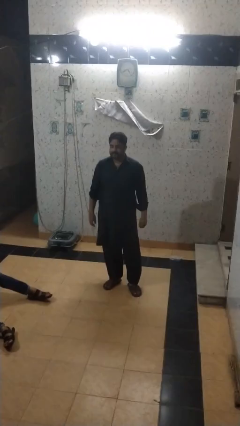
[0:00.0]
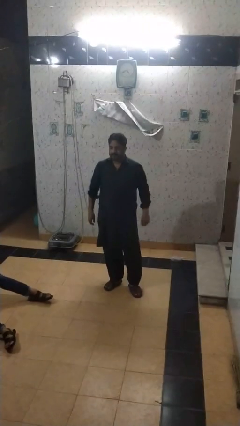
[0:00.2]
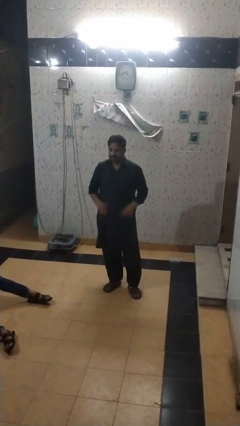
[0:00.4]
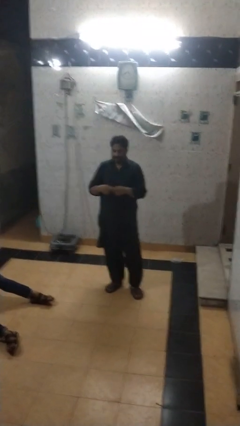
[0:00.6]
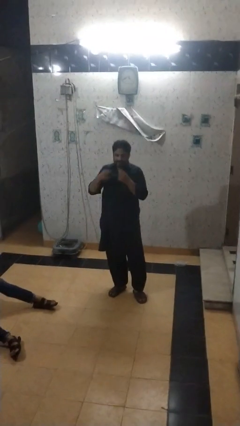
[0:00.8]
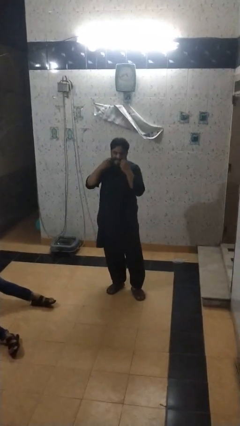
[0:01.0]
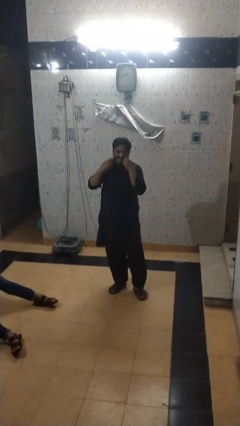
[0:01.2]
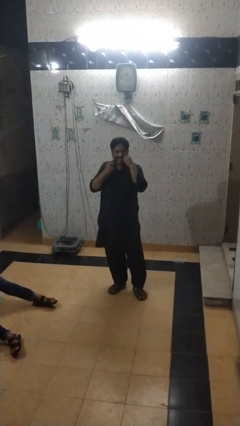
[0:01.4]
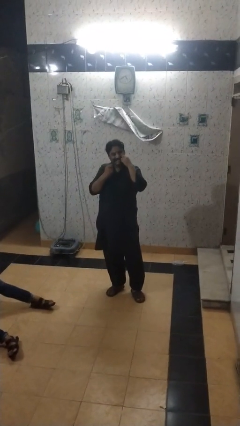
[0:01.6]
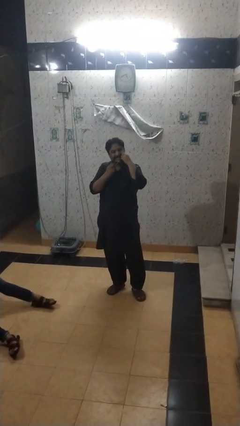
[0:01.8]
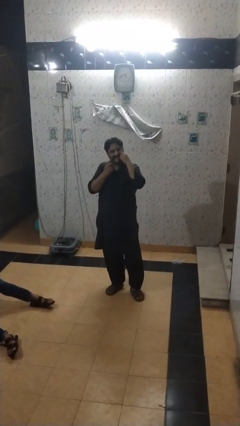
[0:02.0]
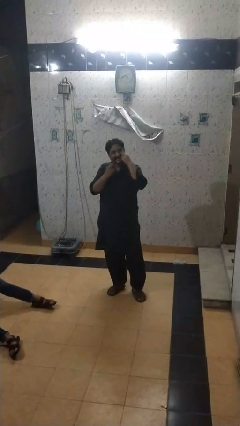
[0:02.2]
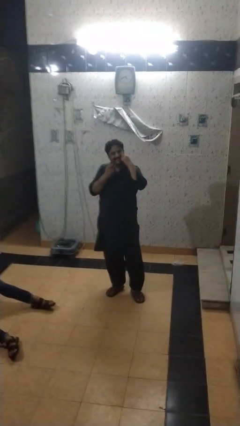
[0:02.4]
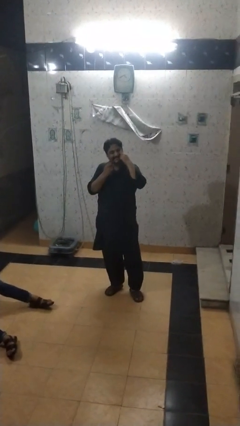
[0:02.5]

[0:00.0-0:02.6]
person flosses

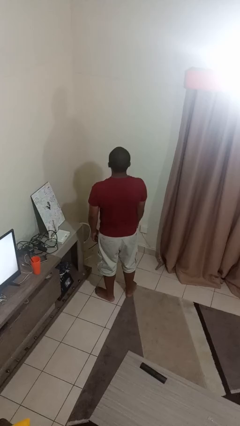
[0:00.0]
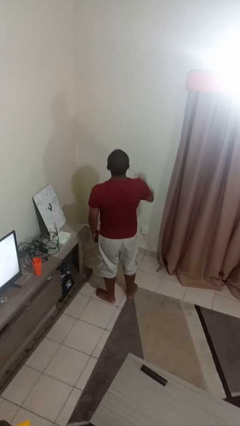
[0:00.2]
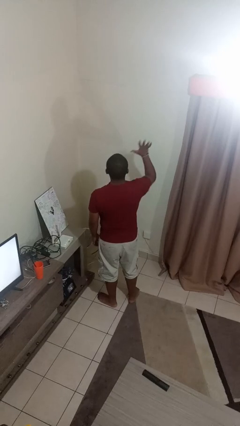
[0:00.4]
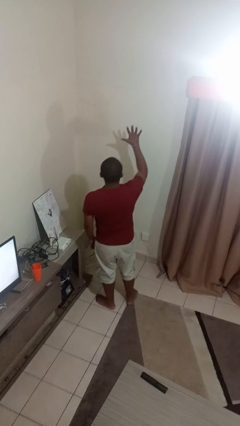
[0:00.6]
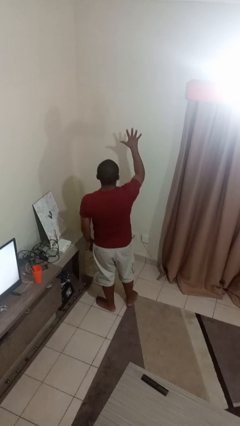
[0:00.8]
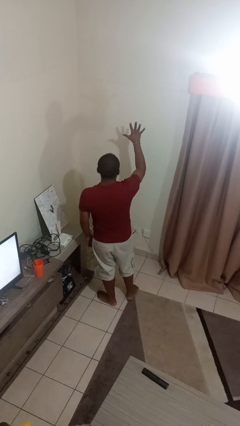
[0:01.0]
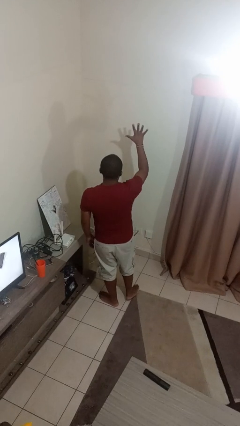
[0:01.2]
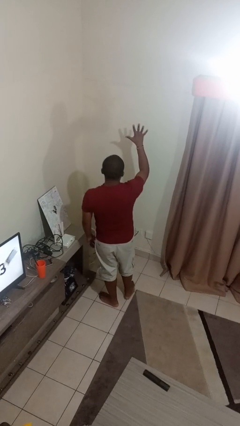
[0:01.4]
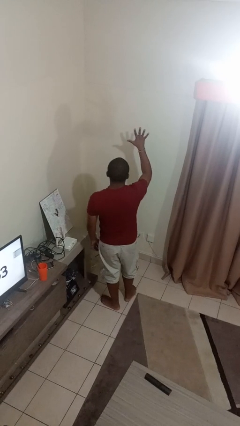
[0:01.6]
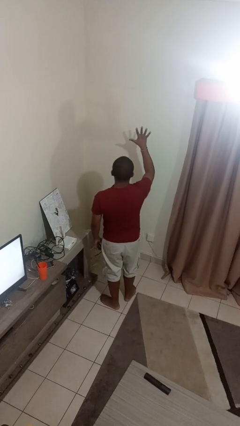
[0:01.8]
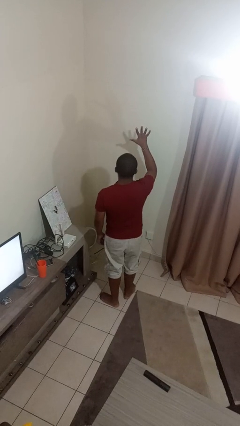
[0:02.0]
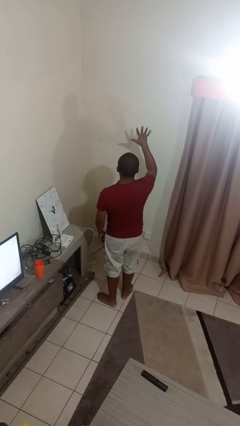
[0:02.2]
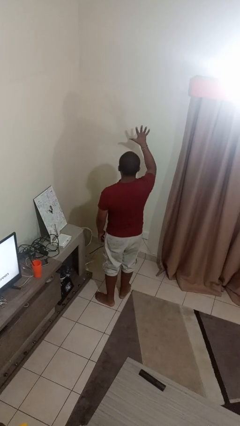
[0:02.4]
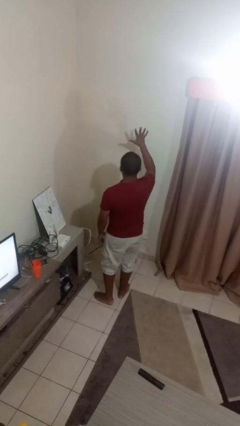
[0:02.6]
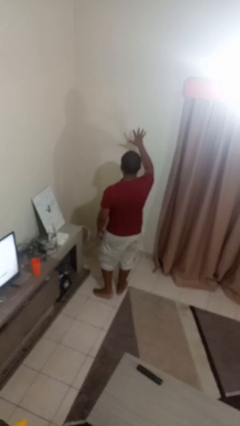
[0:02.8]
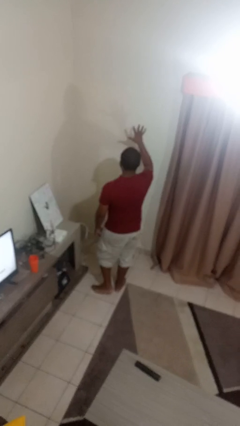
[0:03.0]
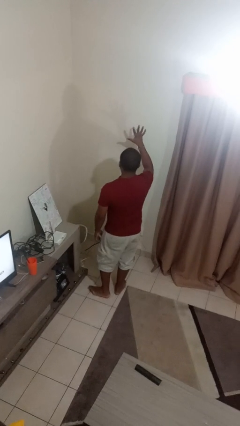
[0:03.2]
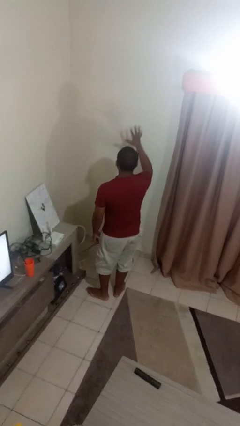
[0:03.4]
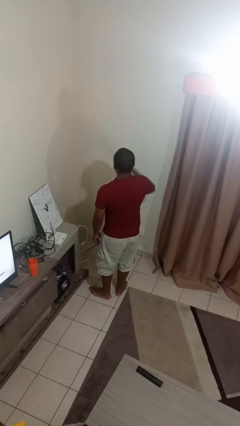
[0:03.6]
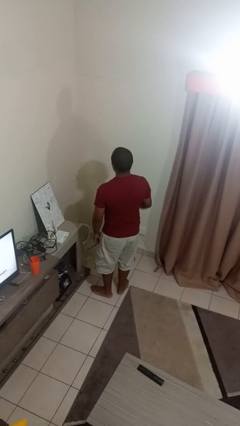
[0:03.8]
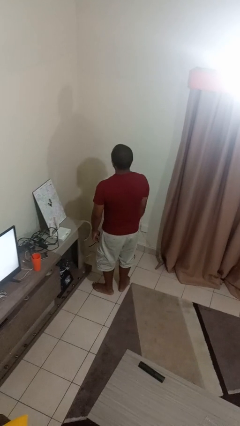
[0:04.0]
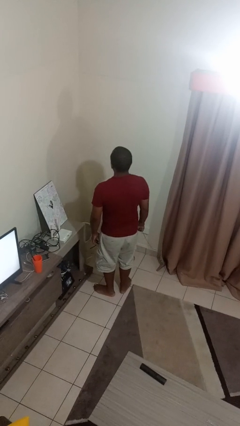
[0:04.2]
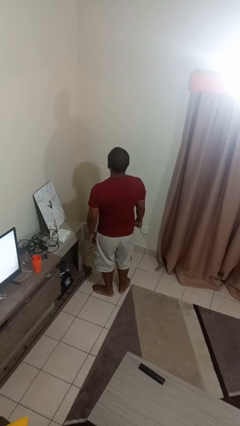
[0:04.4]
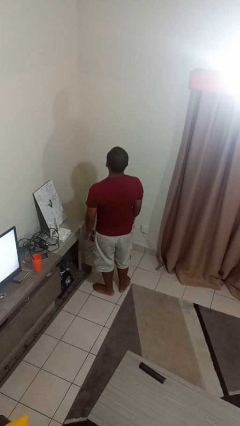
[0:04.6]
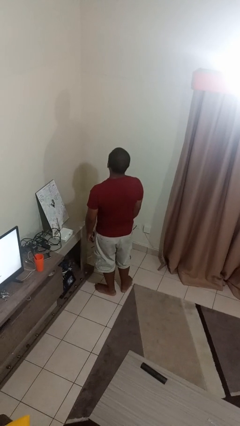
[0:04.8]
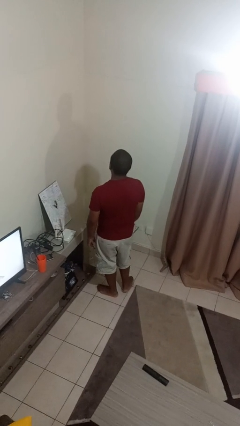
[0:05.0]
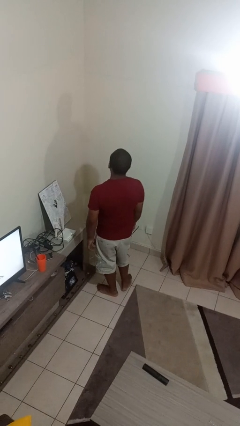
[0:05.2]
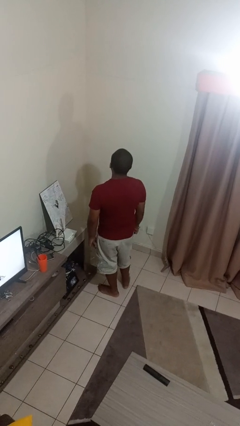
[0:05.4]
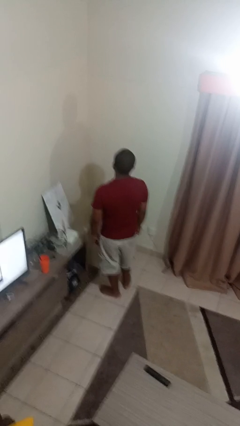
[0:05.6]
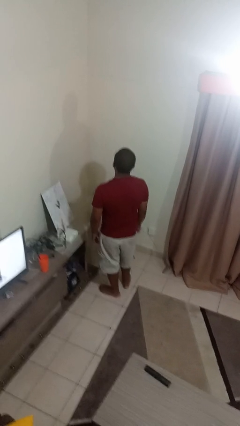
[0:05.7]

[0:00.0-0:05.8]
person gestures number five

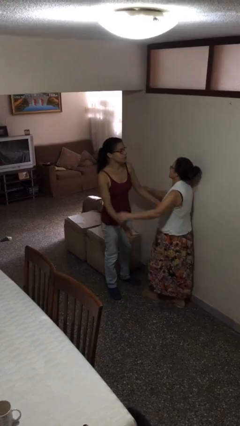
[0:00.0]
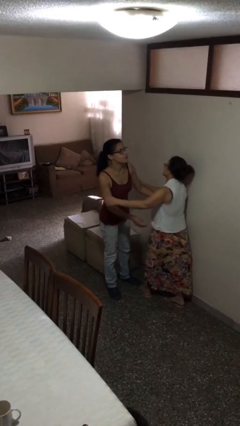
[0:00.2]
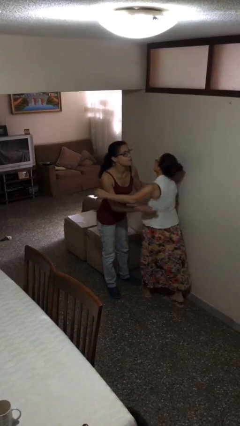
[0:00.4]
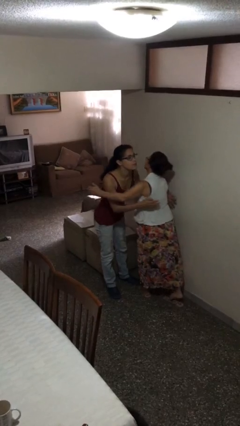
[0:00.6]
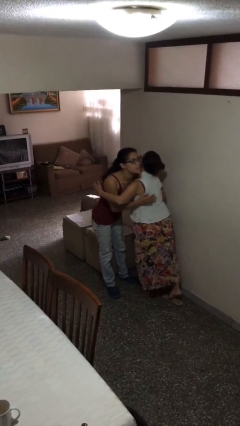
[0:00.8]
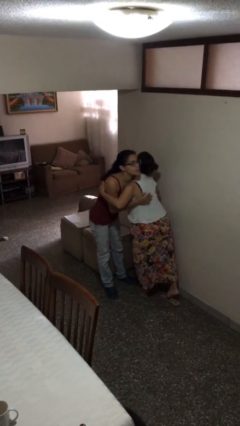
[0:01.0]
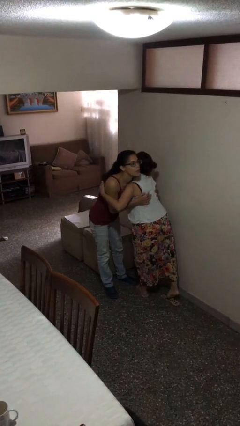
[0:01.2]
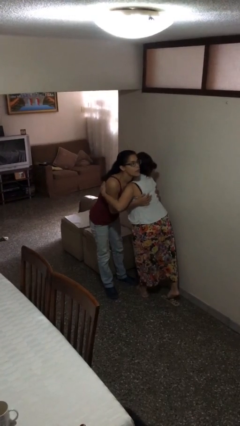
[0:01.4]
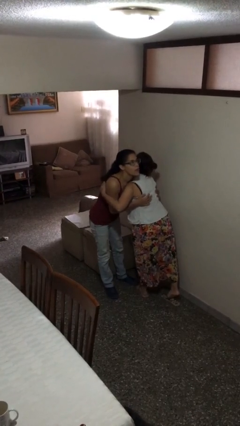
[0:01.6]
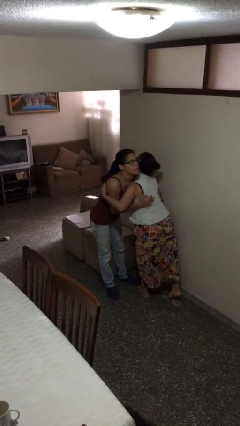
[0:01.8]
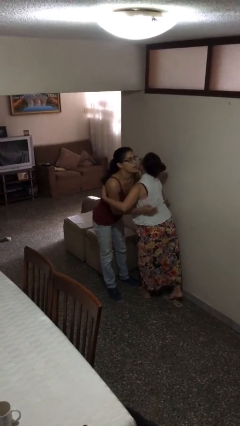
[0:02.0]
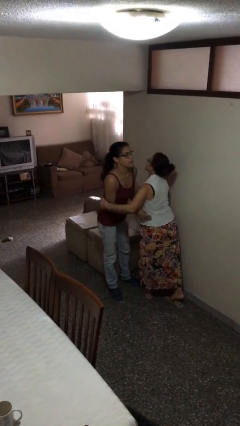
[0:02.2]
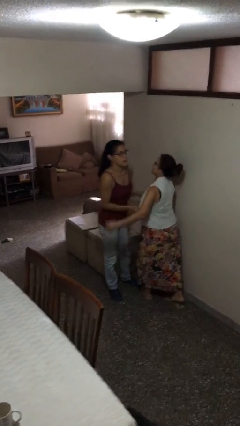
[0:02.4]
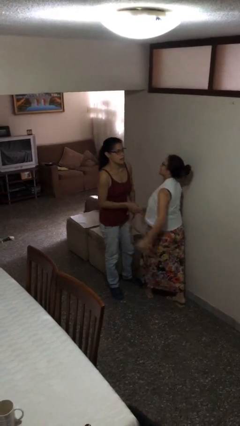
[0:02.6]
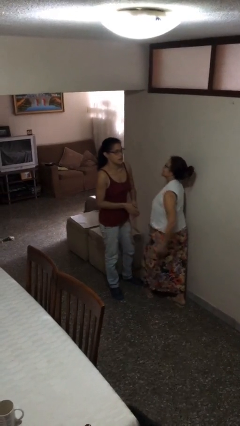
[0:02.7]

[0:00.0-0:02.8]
person embraces person

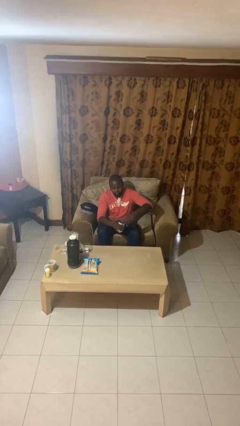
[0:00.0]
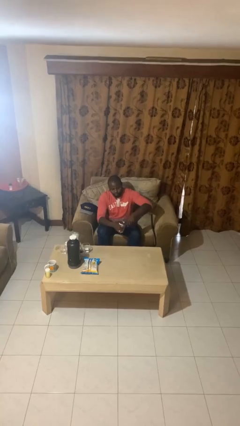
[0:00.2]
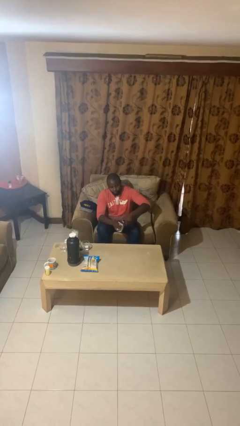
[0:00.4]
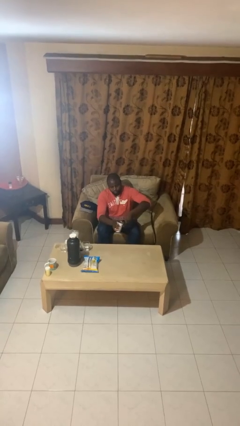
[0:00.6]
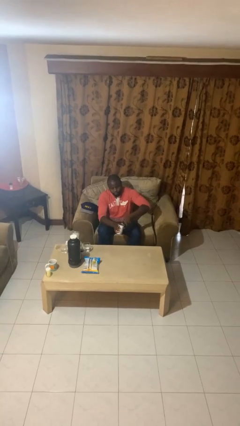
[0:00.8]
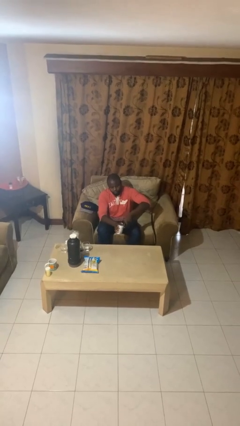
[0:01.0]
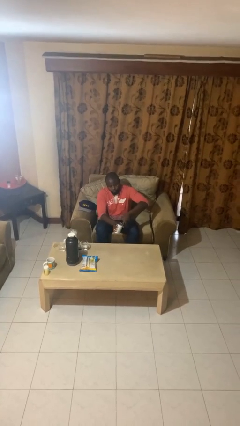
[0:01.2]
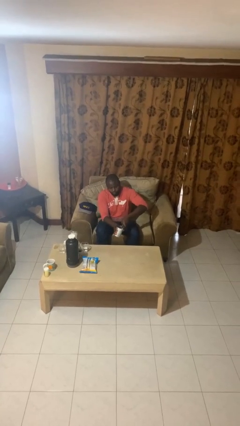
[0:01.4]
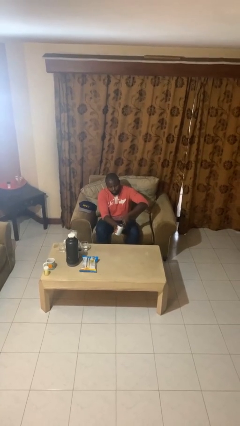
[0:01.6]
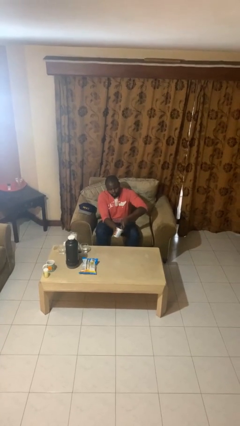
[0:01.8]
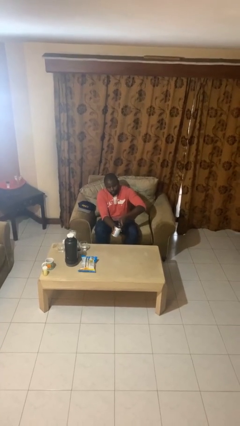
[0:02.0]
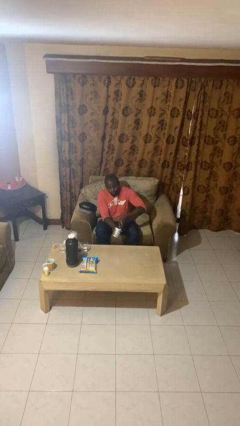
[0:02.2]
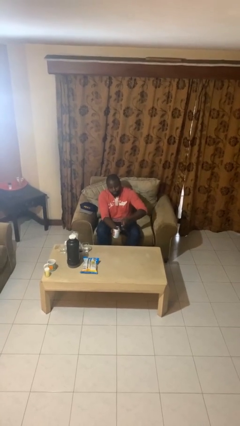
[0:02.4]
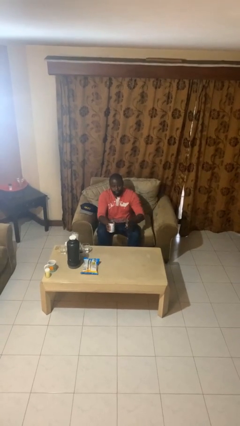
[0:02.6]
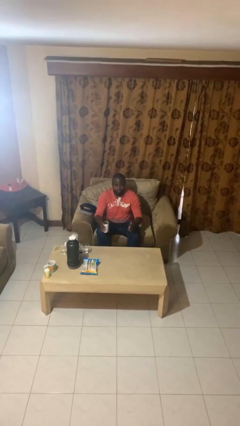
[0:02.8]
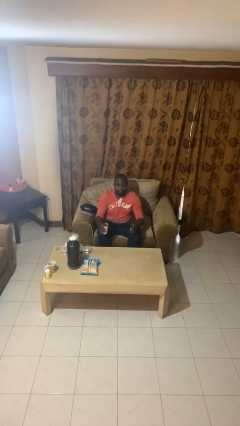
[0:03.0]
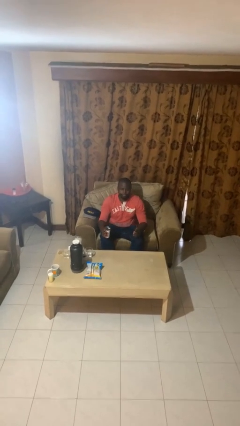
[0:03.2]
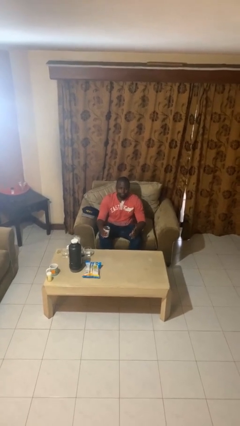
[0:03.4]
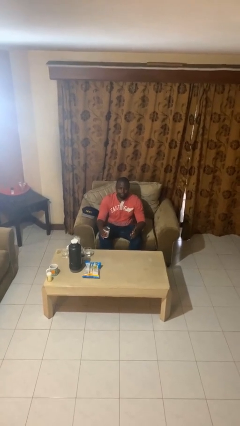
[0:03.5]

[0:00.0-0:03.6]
person opens can with can opener

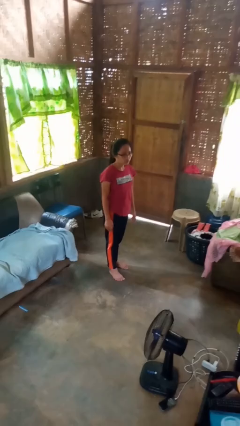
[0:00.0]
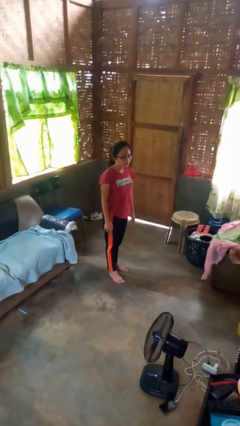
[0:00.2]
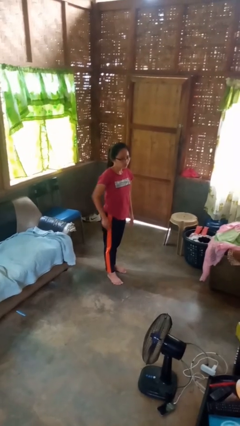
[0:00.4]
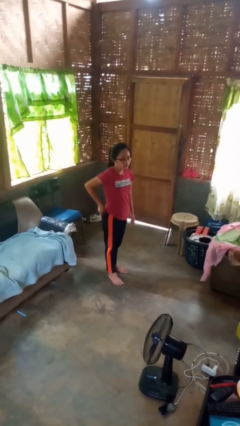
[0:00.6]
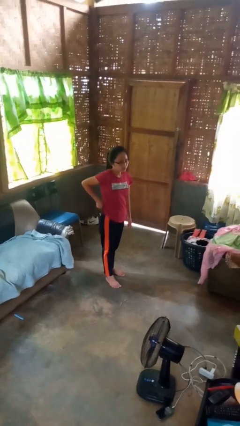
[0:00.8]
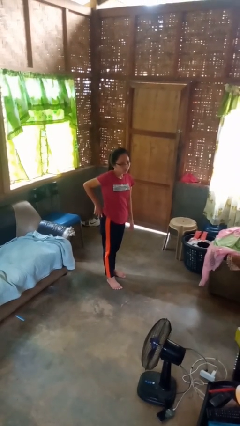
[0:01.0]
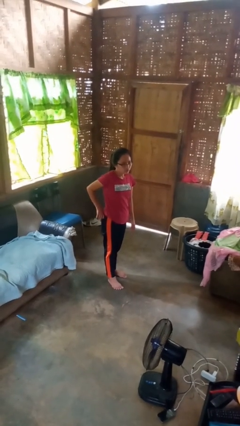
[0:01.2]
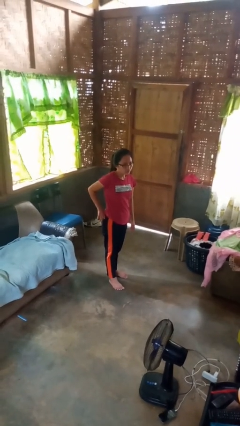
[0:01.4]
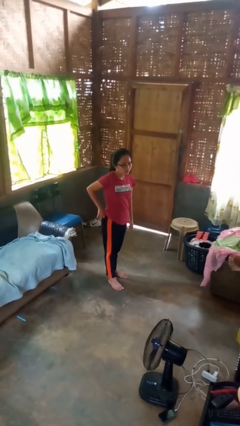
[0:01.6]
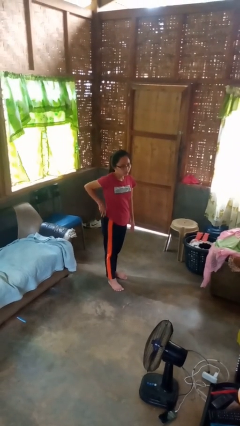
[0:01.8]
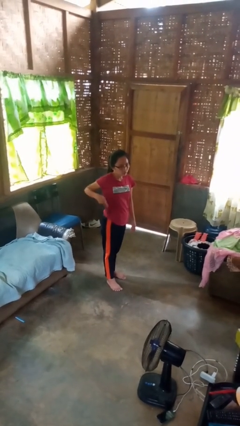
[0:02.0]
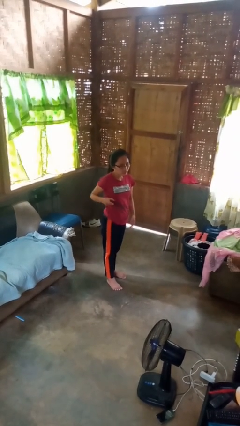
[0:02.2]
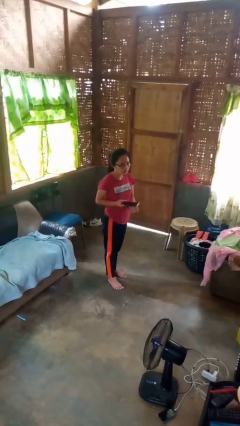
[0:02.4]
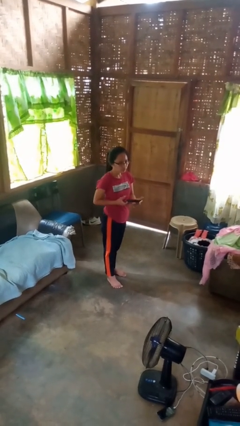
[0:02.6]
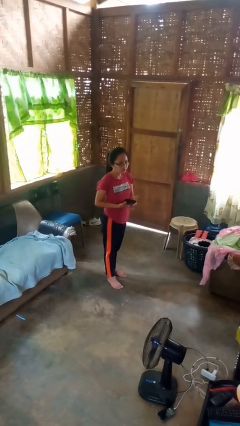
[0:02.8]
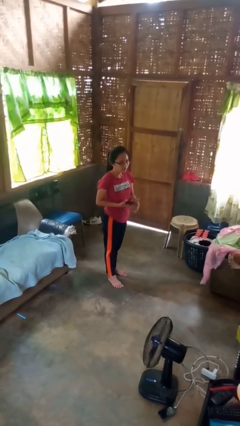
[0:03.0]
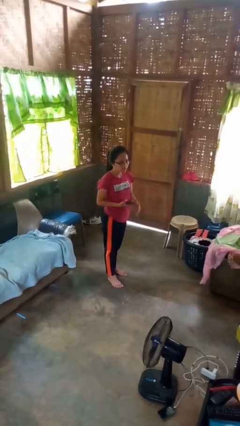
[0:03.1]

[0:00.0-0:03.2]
person takes phone from pocket
